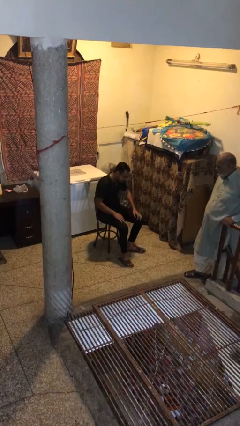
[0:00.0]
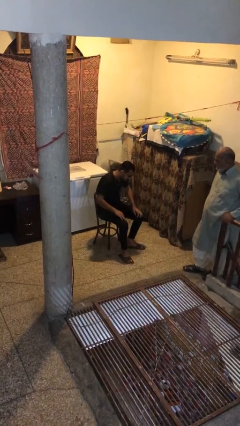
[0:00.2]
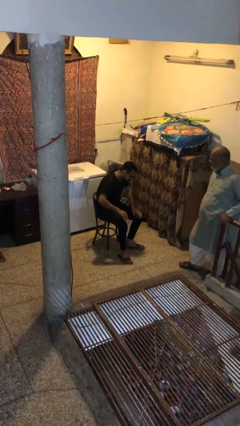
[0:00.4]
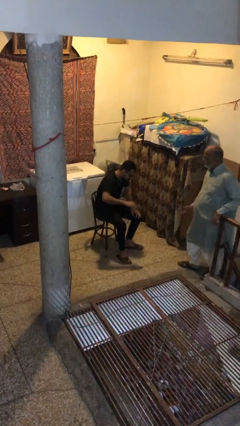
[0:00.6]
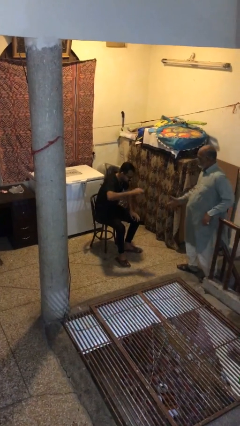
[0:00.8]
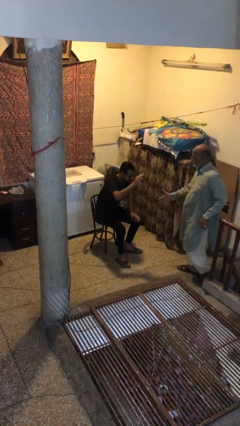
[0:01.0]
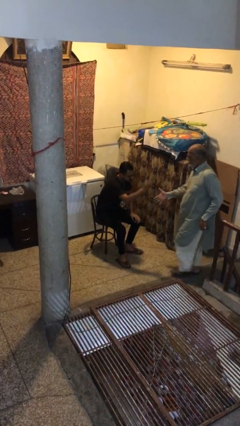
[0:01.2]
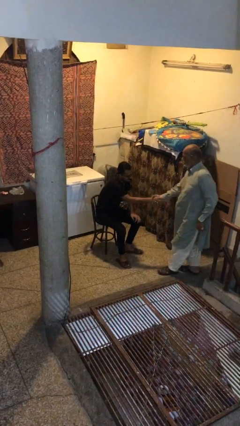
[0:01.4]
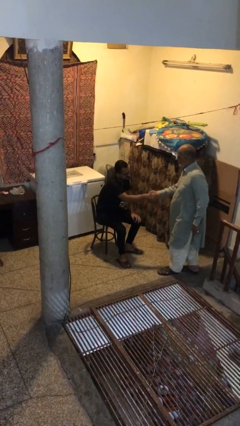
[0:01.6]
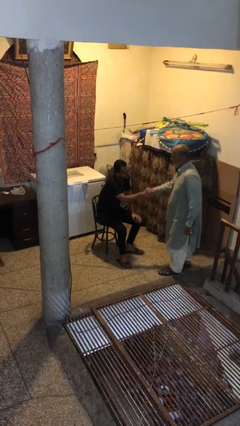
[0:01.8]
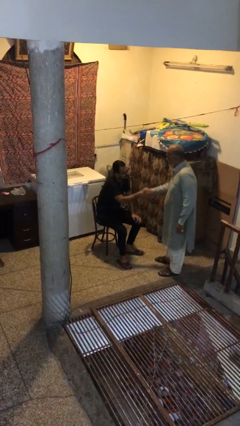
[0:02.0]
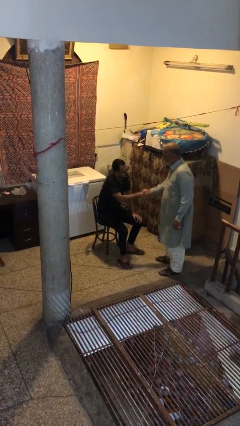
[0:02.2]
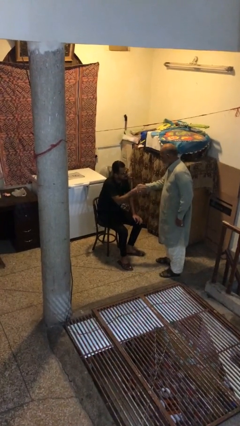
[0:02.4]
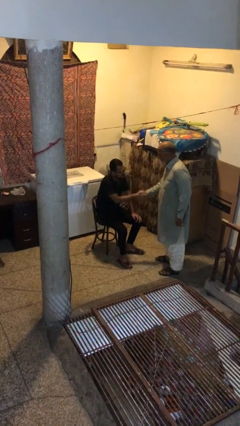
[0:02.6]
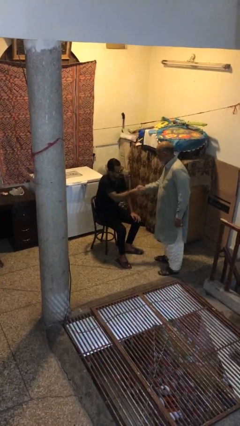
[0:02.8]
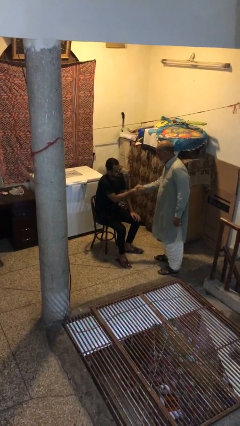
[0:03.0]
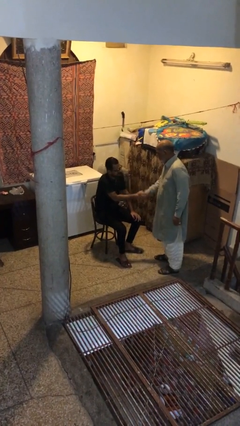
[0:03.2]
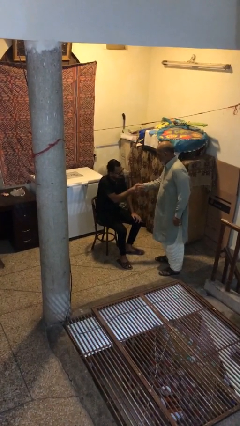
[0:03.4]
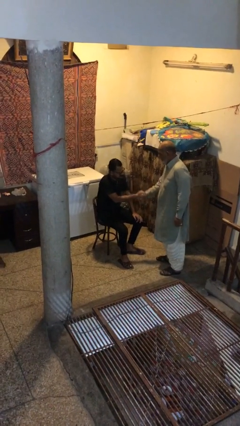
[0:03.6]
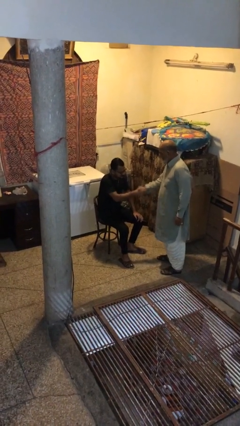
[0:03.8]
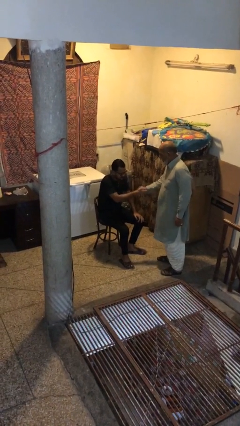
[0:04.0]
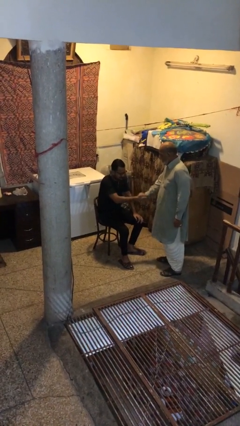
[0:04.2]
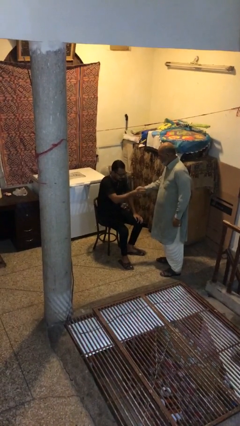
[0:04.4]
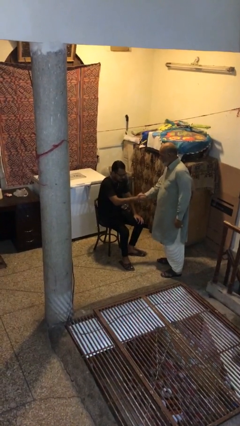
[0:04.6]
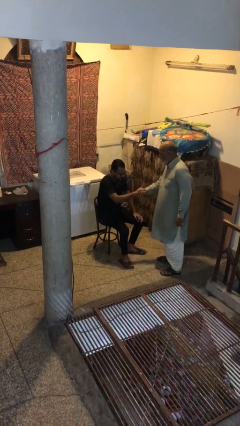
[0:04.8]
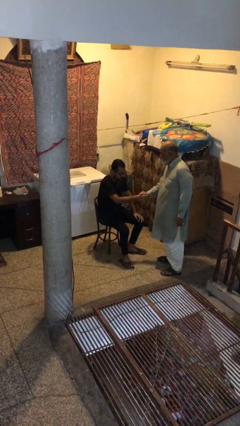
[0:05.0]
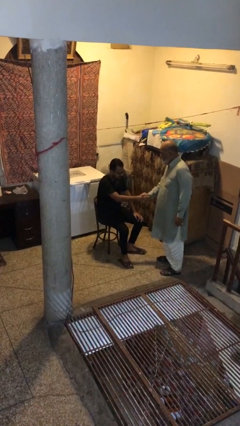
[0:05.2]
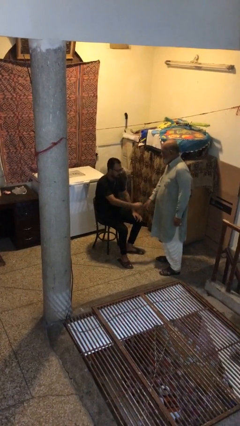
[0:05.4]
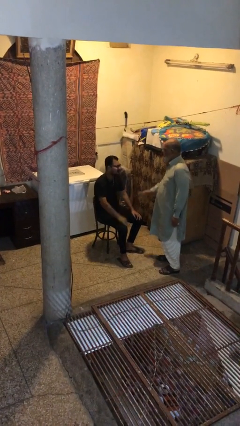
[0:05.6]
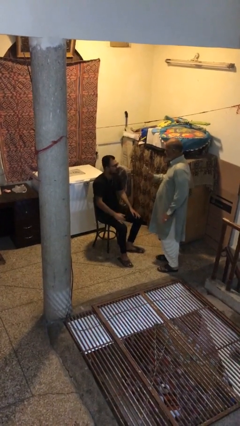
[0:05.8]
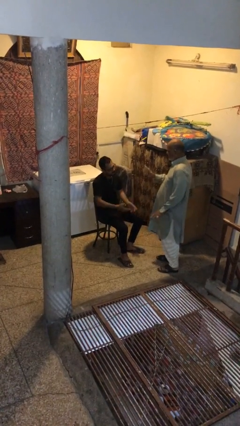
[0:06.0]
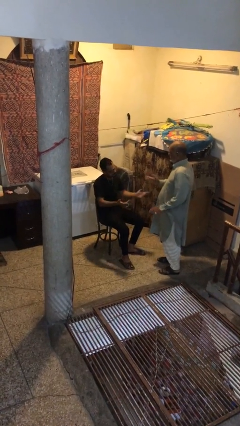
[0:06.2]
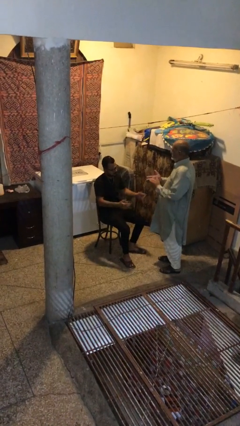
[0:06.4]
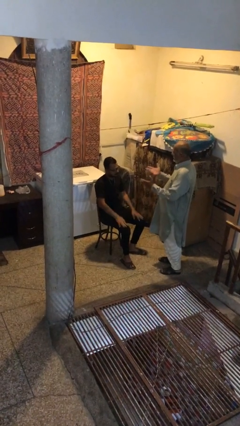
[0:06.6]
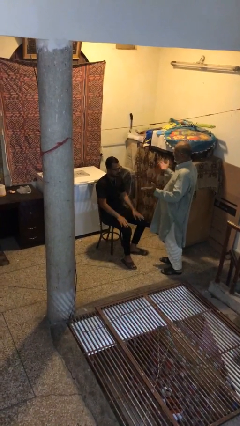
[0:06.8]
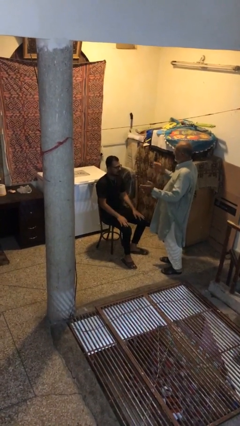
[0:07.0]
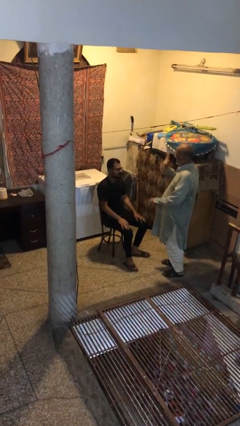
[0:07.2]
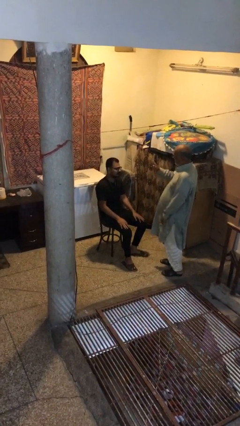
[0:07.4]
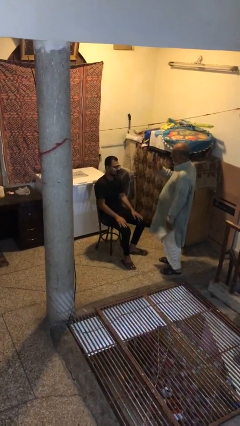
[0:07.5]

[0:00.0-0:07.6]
person shakes hand

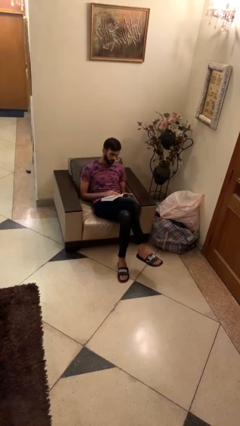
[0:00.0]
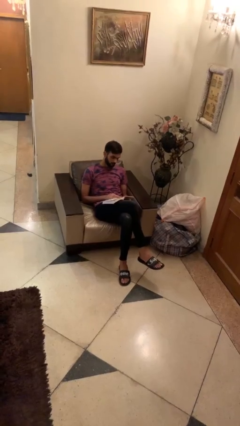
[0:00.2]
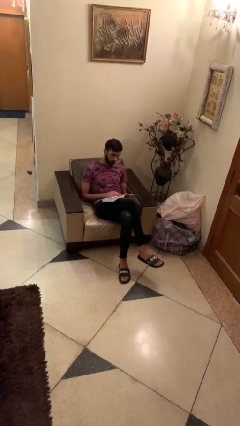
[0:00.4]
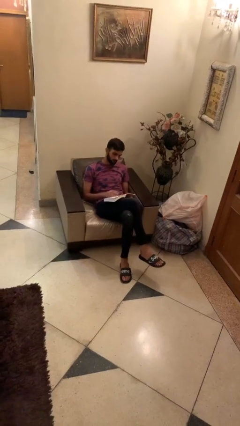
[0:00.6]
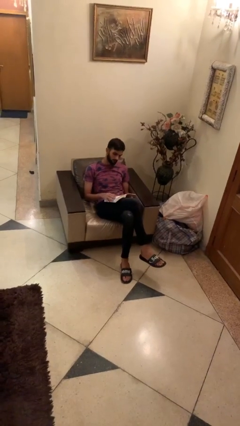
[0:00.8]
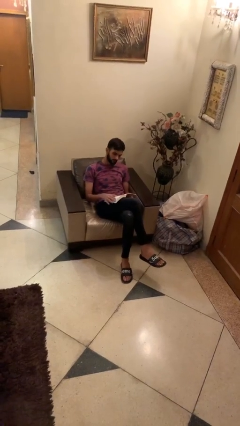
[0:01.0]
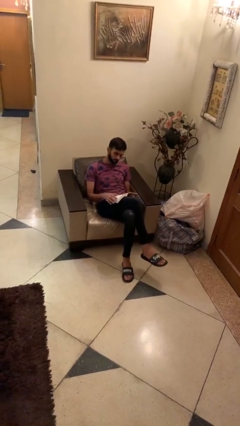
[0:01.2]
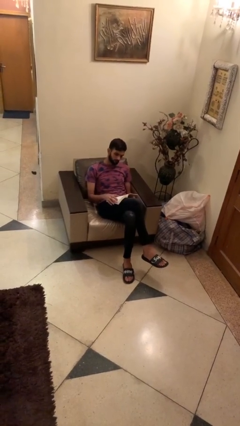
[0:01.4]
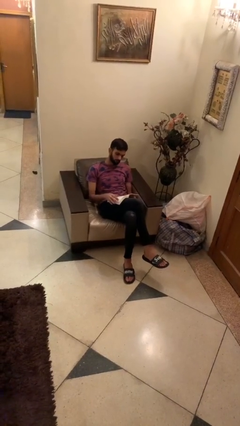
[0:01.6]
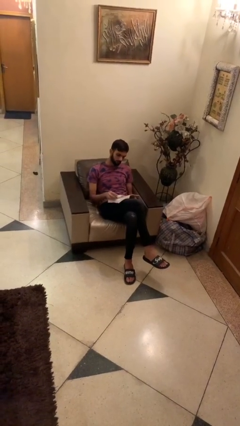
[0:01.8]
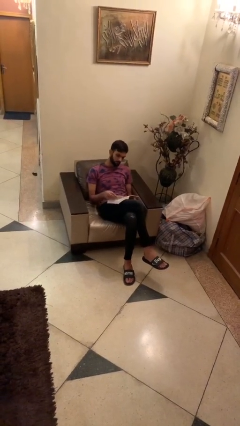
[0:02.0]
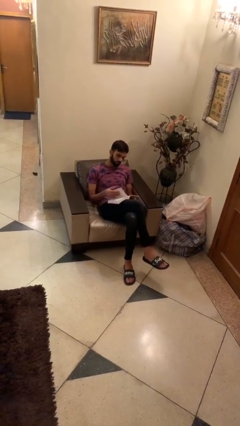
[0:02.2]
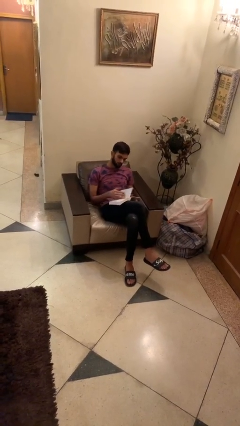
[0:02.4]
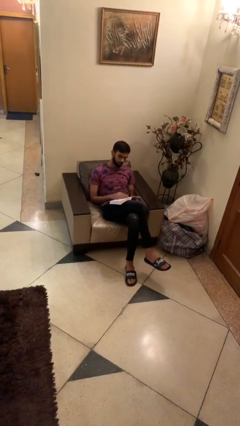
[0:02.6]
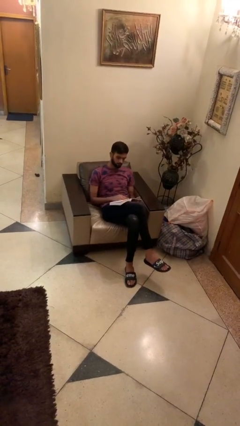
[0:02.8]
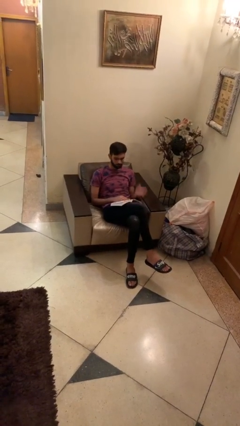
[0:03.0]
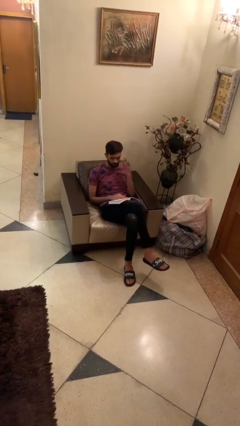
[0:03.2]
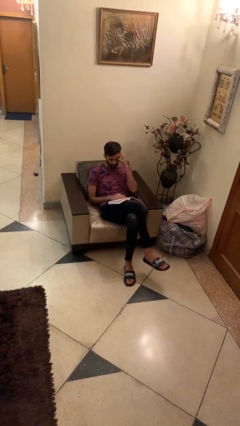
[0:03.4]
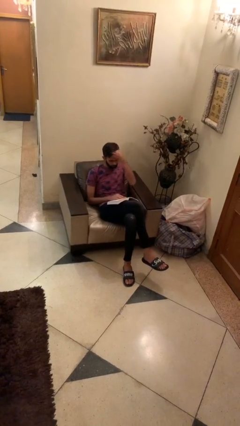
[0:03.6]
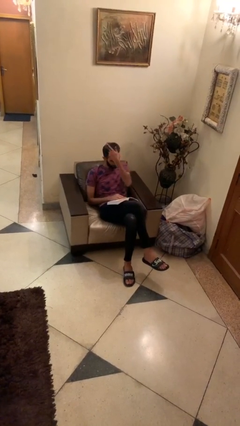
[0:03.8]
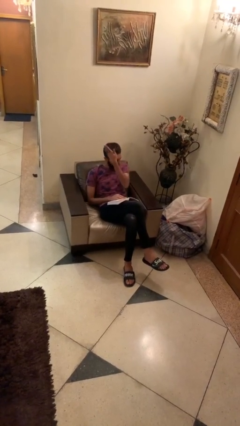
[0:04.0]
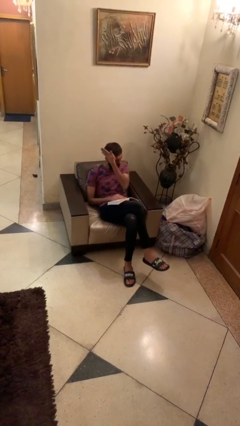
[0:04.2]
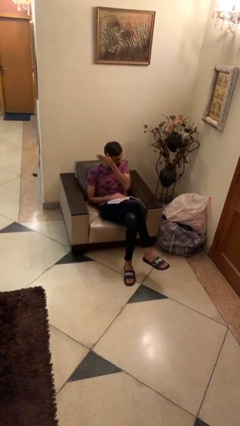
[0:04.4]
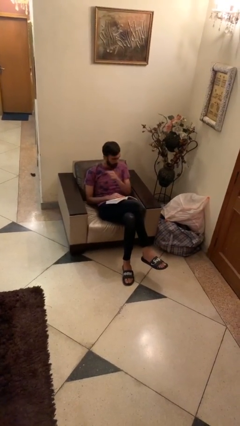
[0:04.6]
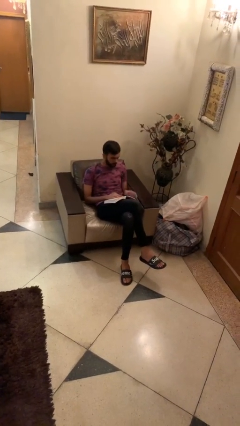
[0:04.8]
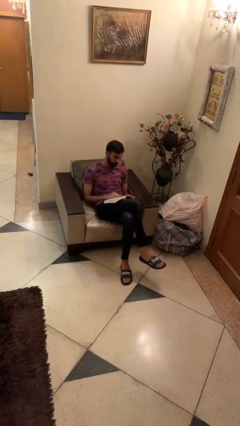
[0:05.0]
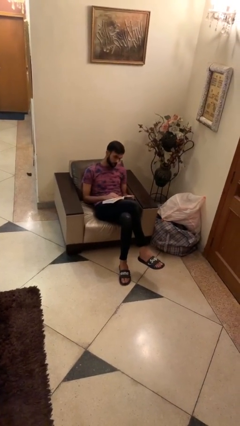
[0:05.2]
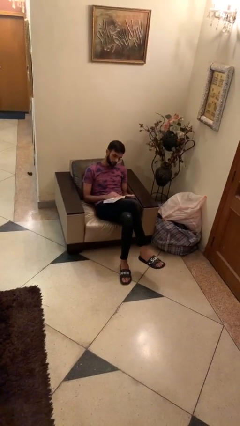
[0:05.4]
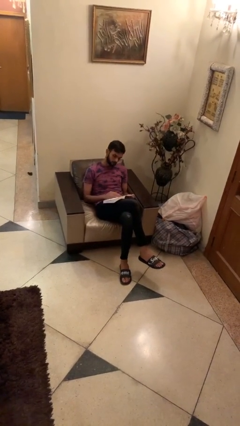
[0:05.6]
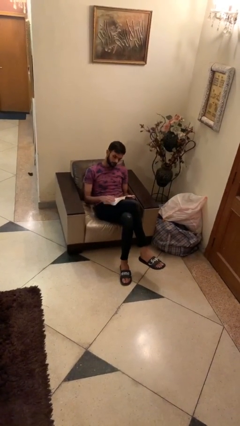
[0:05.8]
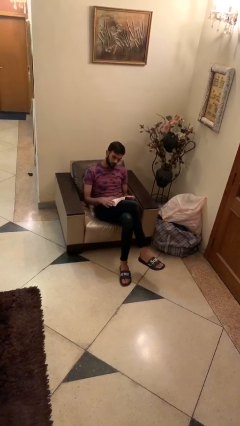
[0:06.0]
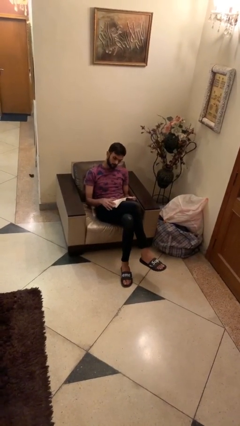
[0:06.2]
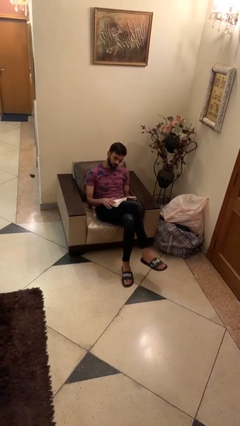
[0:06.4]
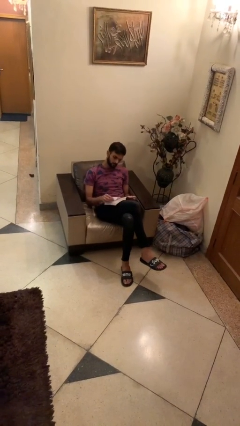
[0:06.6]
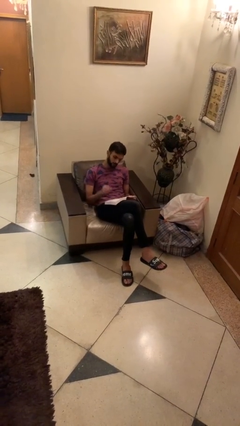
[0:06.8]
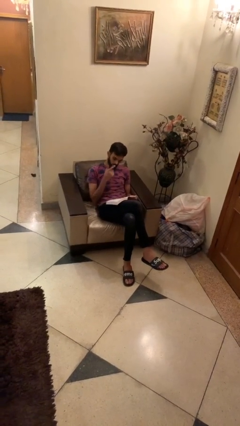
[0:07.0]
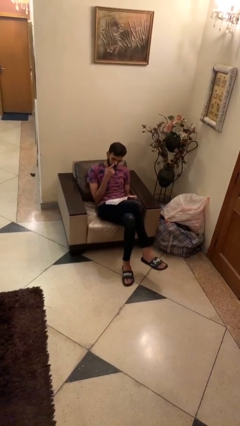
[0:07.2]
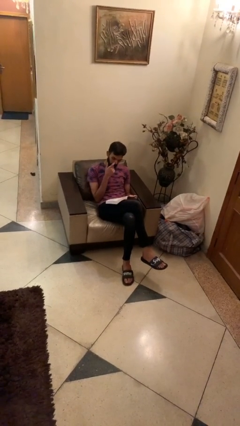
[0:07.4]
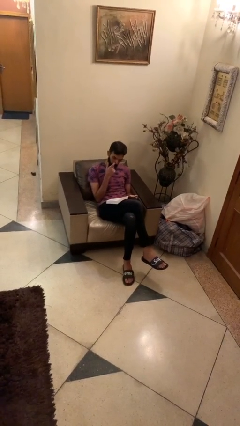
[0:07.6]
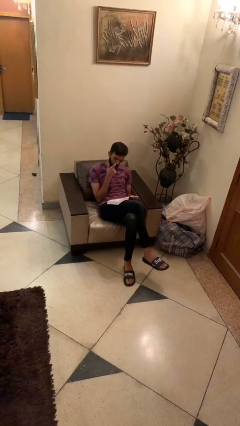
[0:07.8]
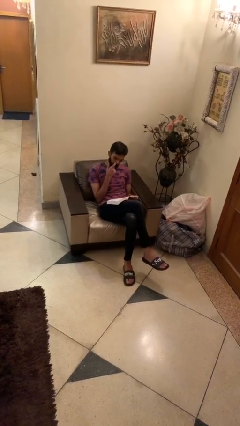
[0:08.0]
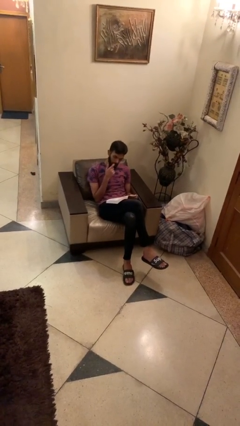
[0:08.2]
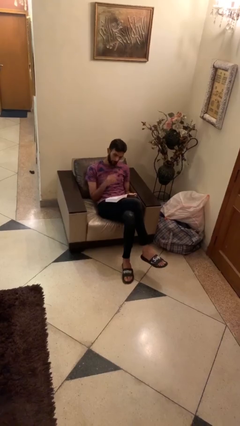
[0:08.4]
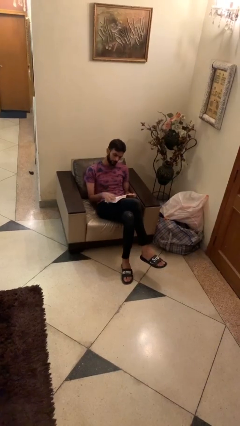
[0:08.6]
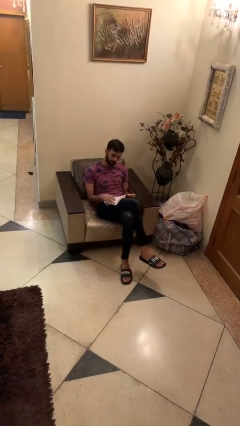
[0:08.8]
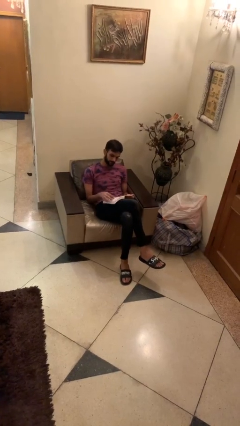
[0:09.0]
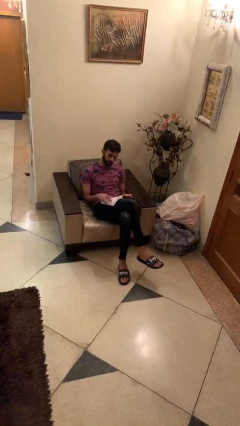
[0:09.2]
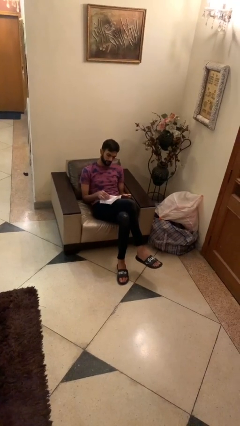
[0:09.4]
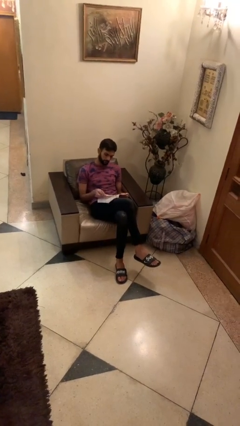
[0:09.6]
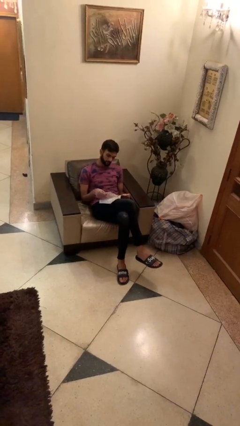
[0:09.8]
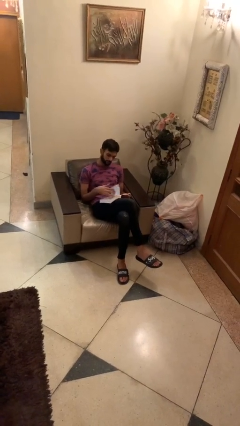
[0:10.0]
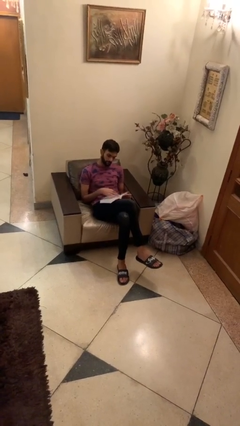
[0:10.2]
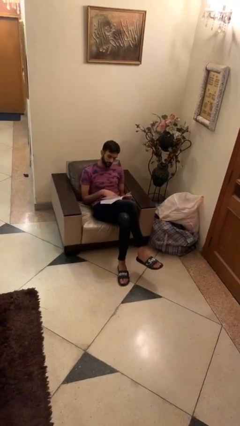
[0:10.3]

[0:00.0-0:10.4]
person reads document
